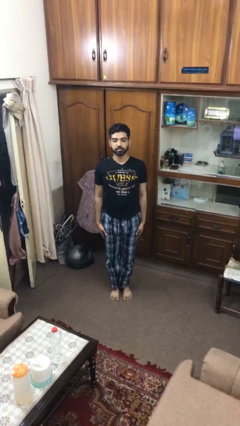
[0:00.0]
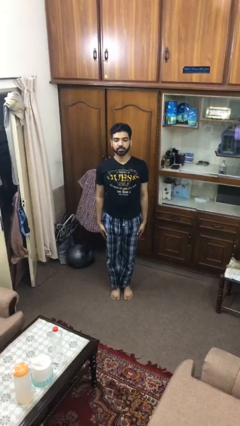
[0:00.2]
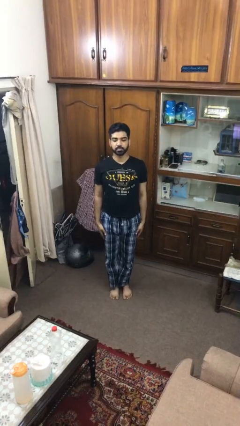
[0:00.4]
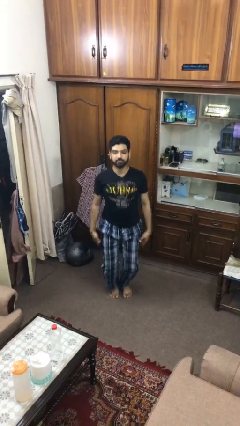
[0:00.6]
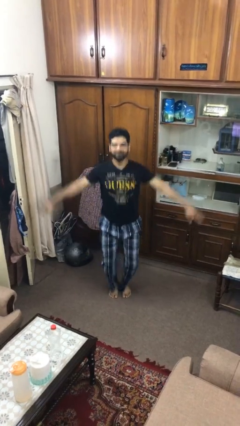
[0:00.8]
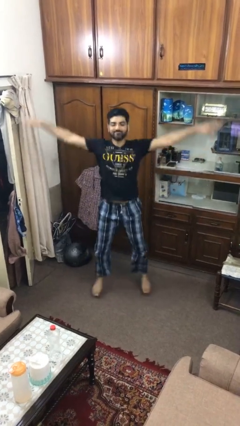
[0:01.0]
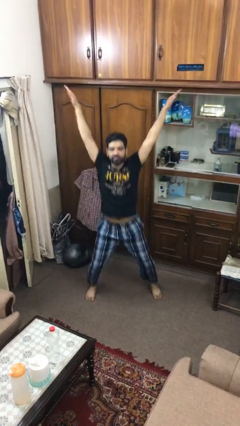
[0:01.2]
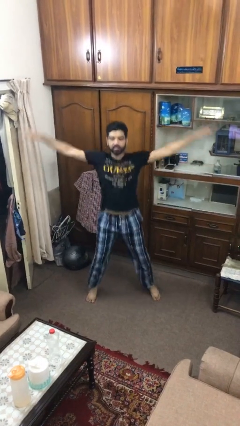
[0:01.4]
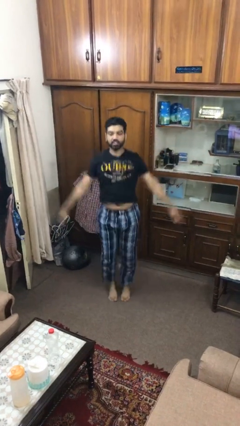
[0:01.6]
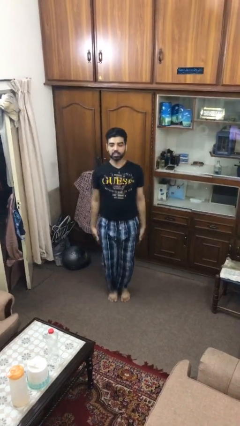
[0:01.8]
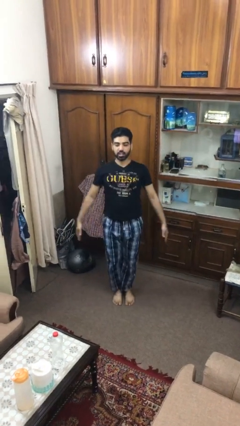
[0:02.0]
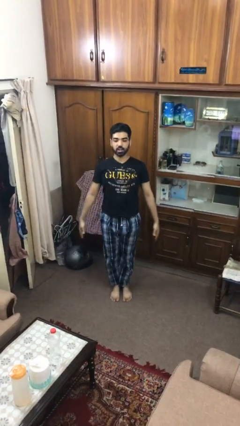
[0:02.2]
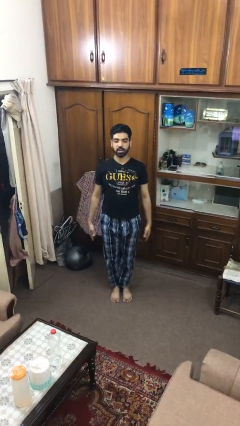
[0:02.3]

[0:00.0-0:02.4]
person exercises with jumping jacks

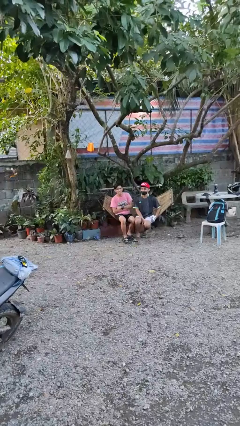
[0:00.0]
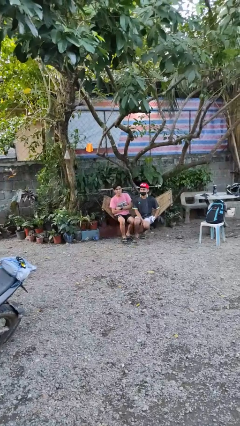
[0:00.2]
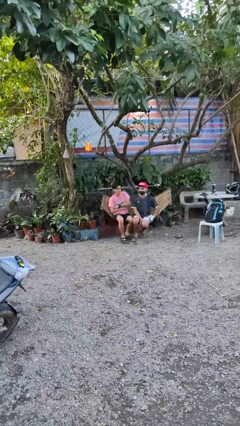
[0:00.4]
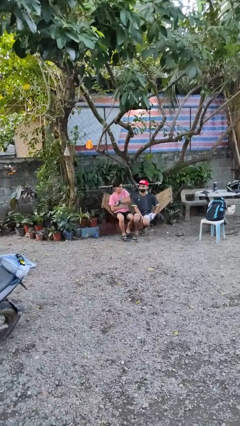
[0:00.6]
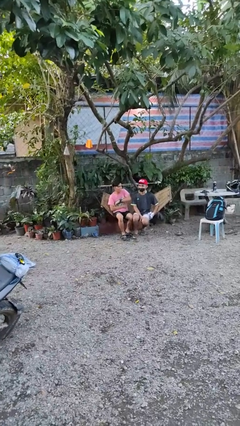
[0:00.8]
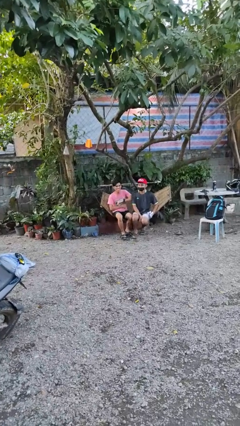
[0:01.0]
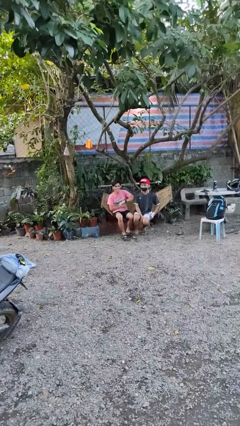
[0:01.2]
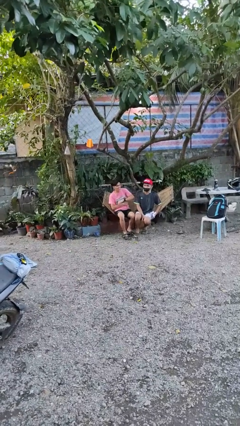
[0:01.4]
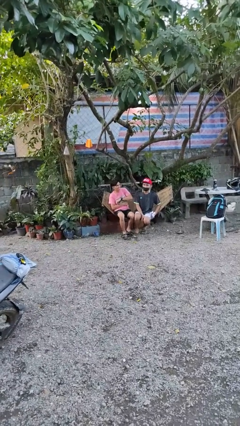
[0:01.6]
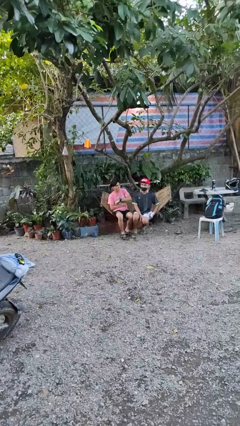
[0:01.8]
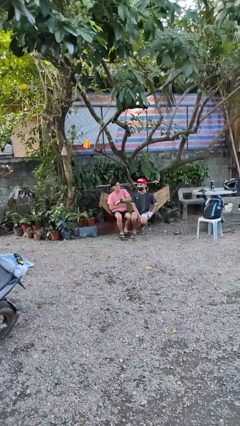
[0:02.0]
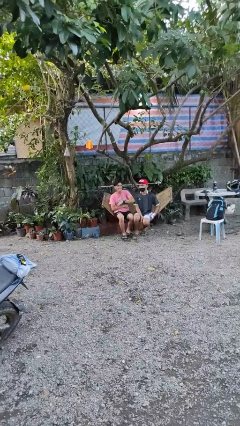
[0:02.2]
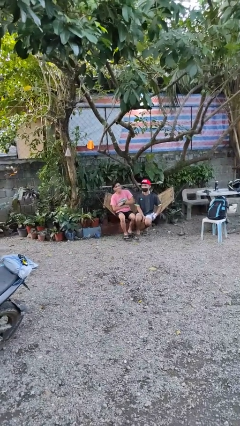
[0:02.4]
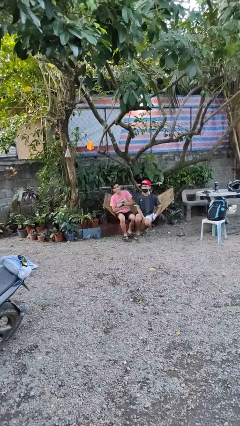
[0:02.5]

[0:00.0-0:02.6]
person nudges person with elbow

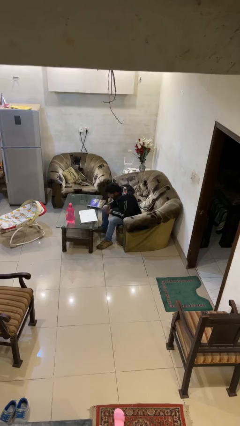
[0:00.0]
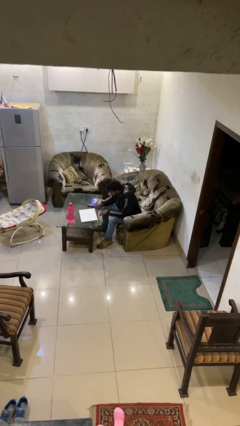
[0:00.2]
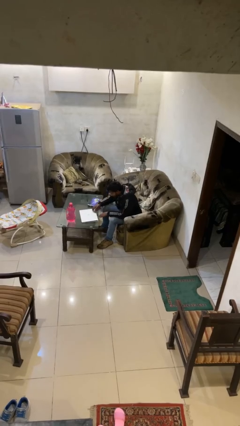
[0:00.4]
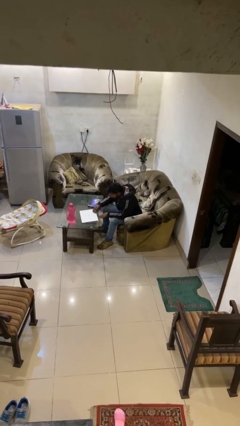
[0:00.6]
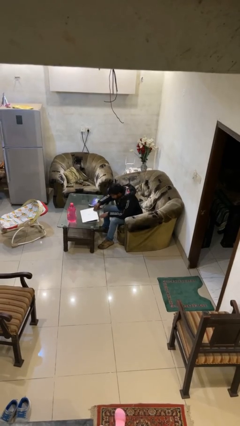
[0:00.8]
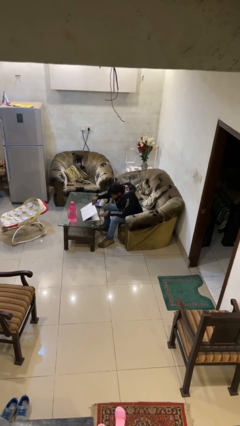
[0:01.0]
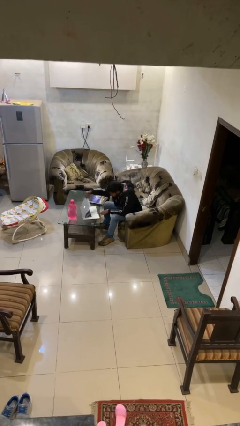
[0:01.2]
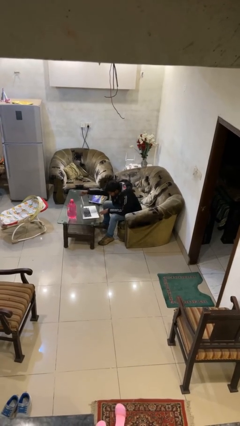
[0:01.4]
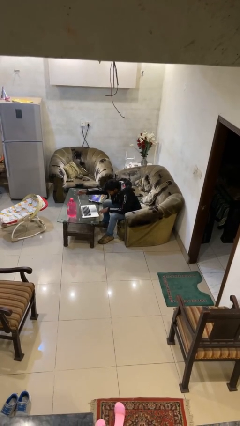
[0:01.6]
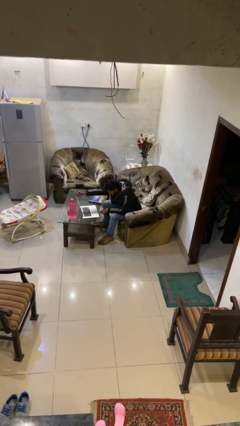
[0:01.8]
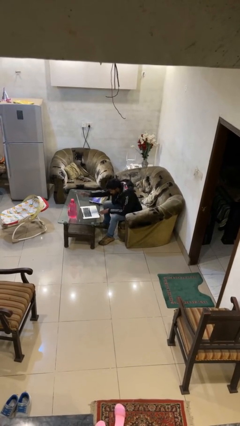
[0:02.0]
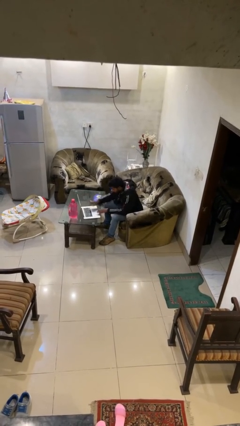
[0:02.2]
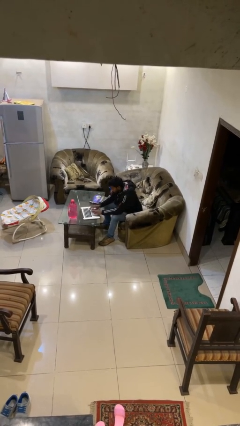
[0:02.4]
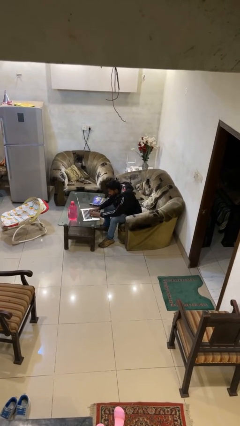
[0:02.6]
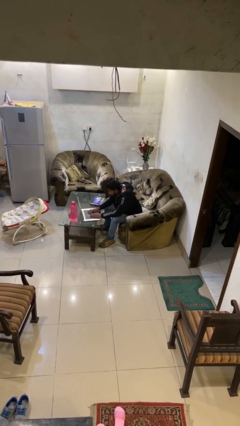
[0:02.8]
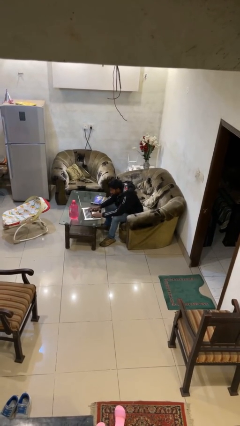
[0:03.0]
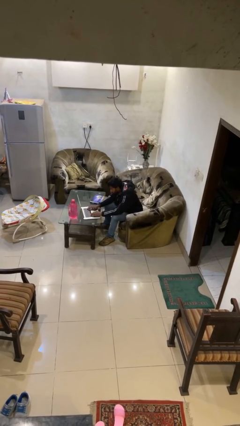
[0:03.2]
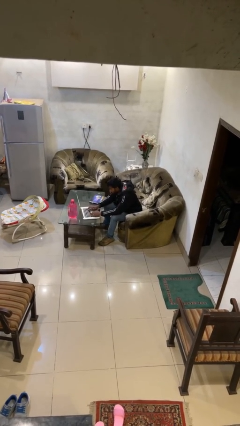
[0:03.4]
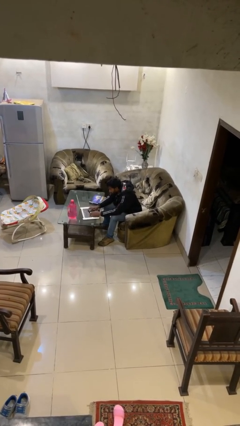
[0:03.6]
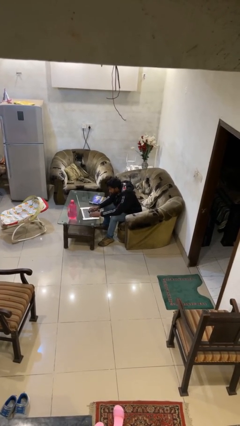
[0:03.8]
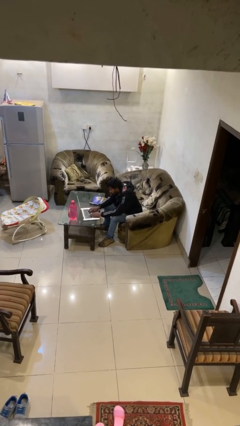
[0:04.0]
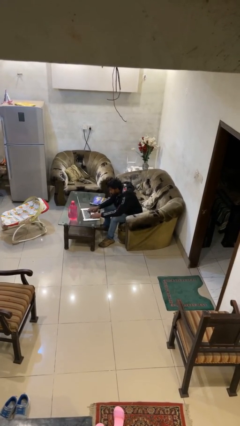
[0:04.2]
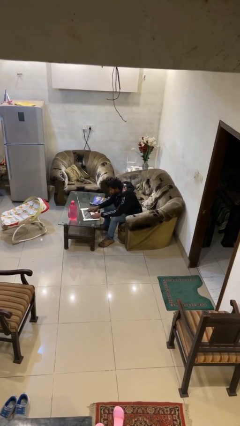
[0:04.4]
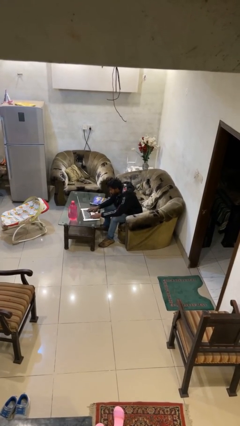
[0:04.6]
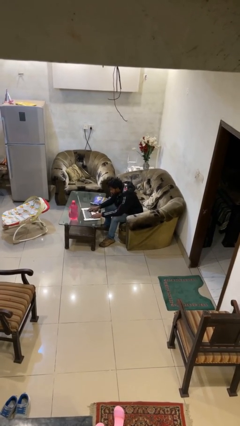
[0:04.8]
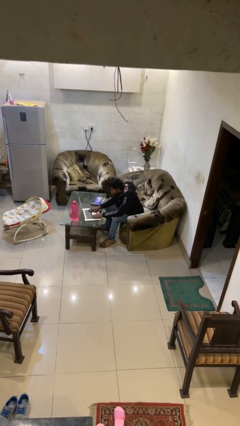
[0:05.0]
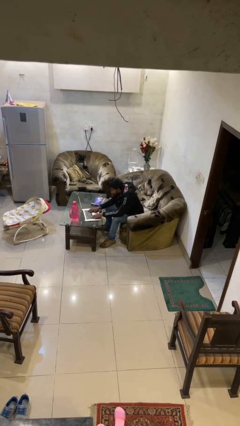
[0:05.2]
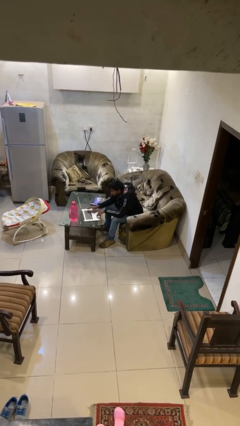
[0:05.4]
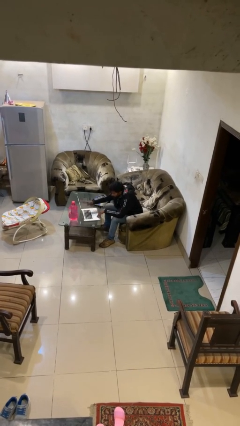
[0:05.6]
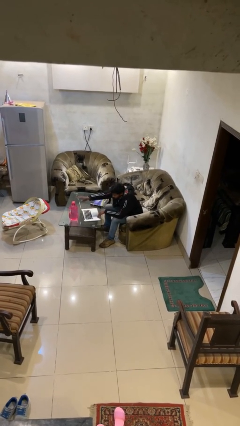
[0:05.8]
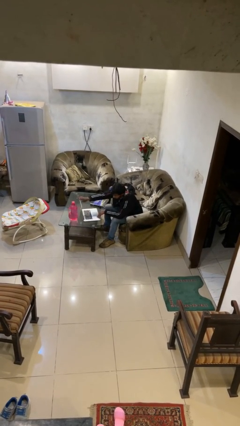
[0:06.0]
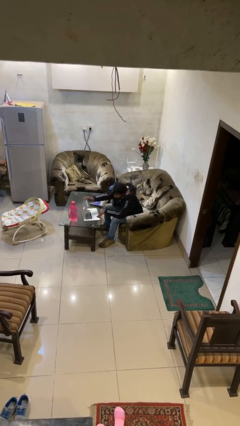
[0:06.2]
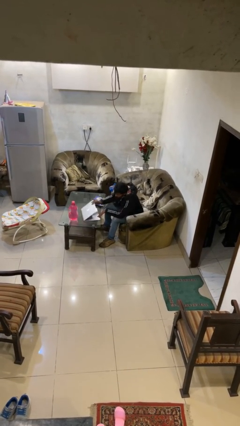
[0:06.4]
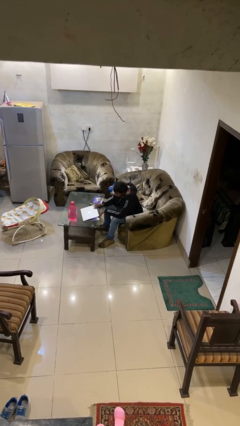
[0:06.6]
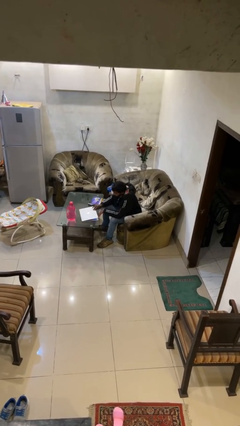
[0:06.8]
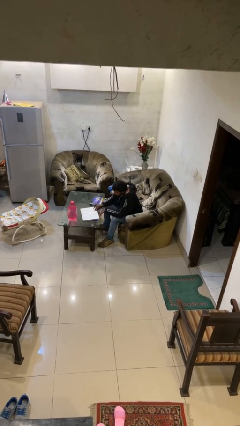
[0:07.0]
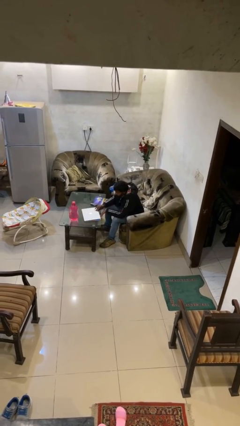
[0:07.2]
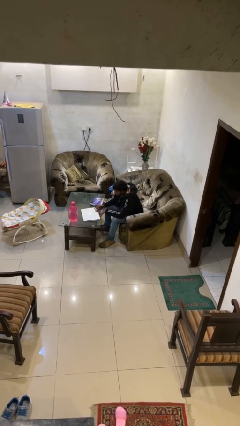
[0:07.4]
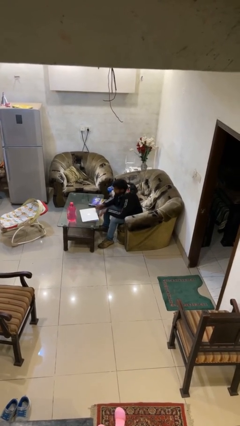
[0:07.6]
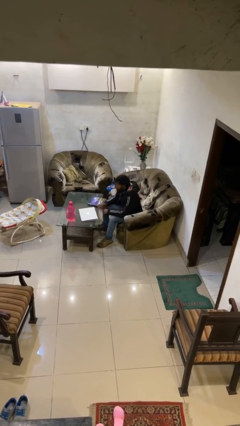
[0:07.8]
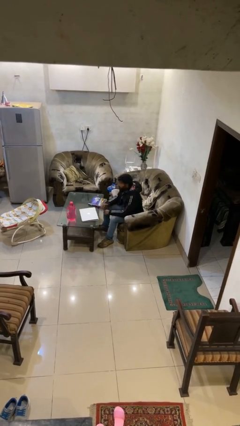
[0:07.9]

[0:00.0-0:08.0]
person interacts with laptop

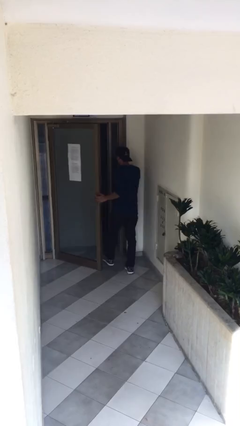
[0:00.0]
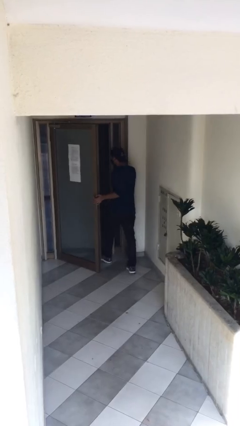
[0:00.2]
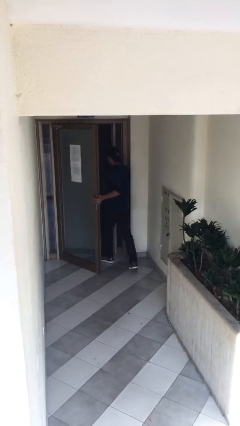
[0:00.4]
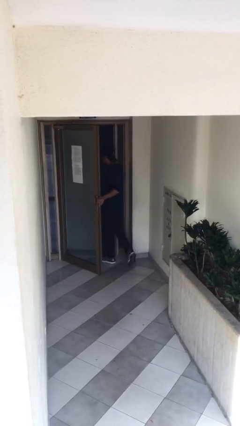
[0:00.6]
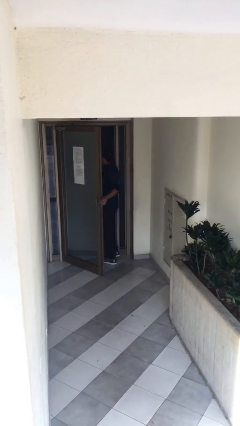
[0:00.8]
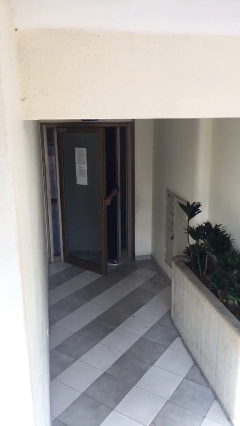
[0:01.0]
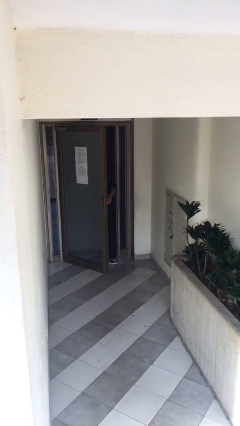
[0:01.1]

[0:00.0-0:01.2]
person exits scene through structure

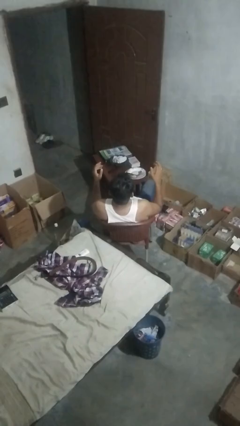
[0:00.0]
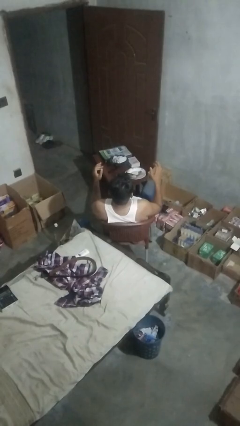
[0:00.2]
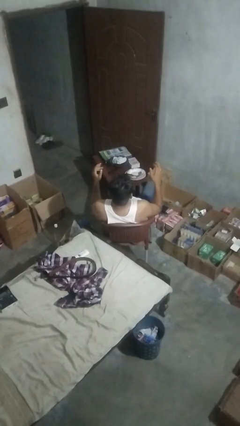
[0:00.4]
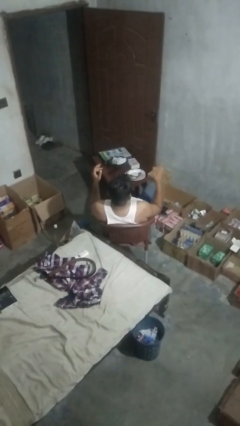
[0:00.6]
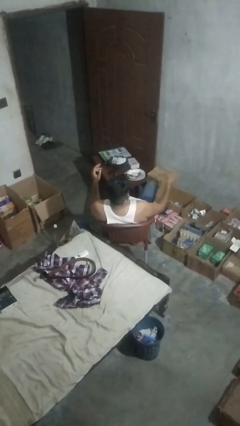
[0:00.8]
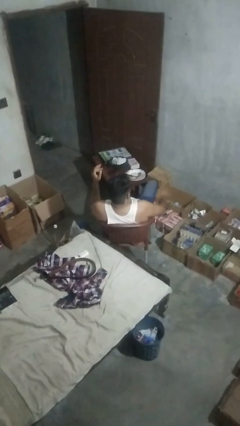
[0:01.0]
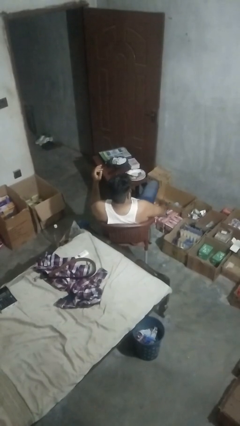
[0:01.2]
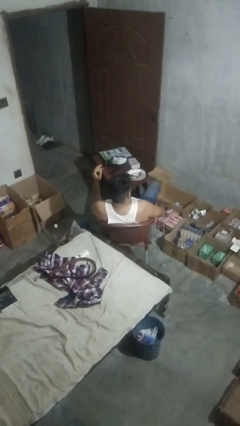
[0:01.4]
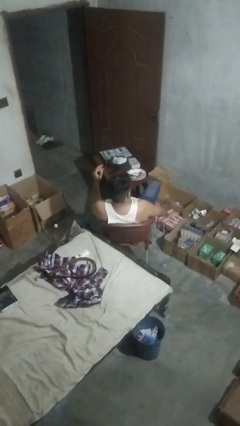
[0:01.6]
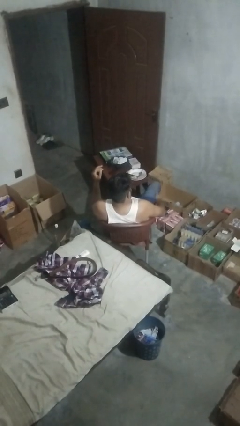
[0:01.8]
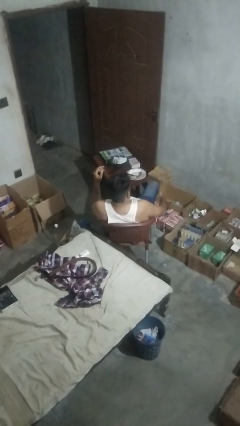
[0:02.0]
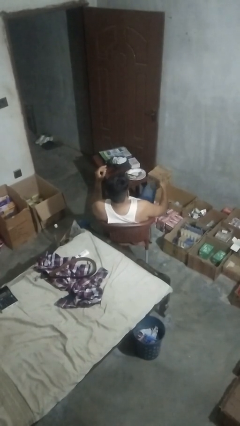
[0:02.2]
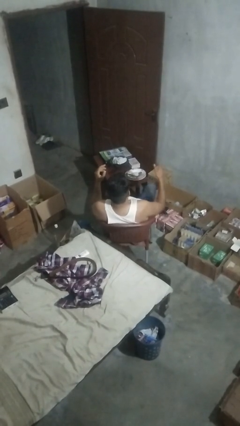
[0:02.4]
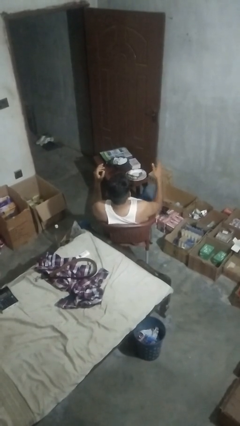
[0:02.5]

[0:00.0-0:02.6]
person slaps hands on thighs

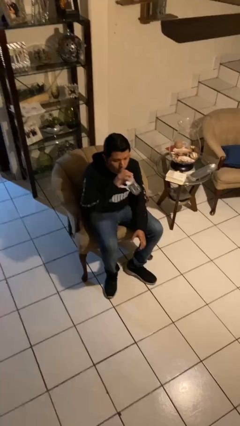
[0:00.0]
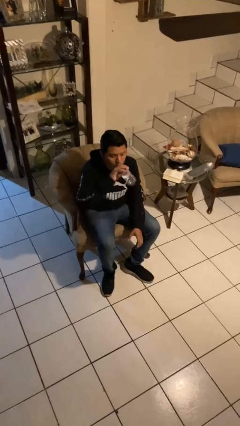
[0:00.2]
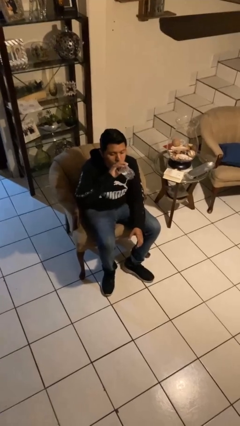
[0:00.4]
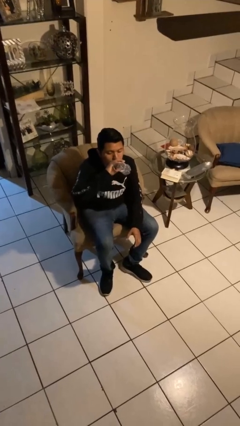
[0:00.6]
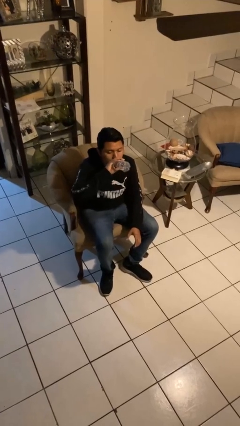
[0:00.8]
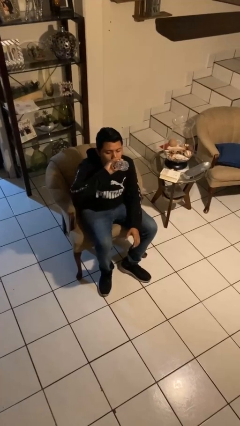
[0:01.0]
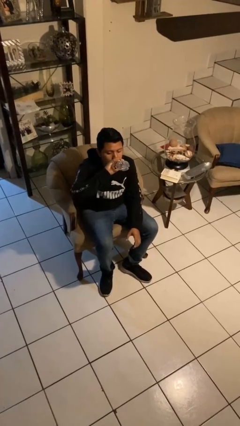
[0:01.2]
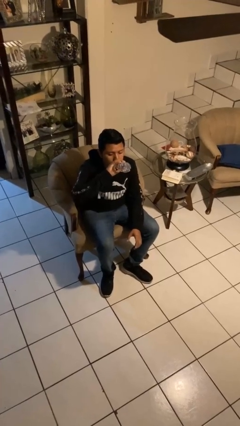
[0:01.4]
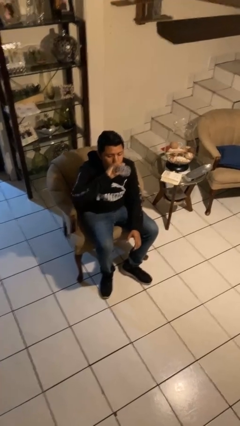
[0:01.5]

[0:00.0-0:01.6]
person drinks from bottle
